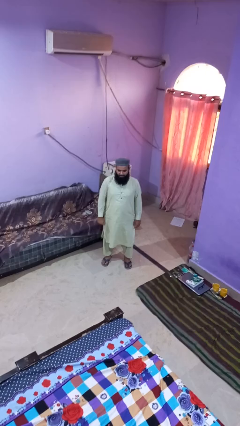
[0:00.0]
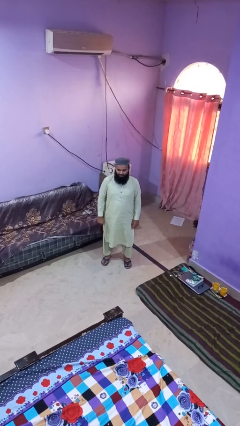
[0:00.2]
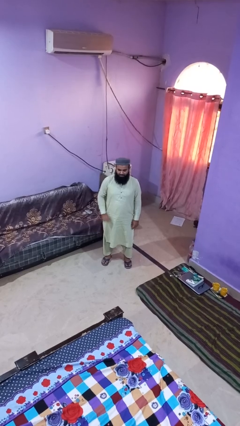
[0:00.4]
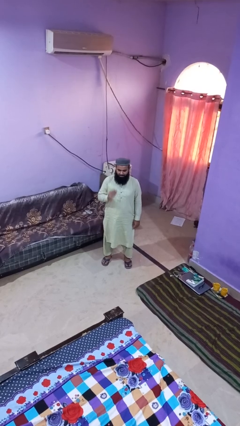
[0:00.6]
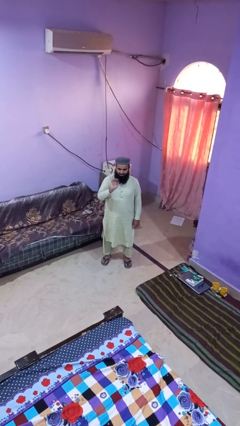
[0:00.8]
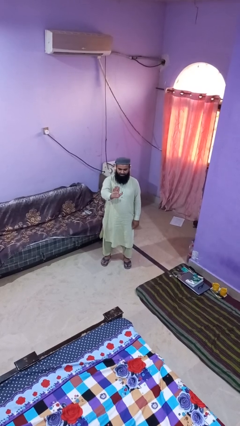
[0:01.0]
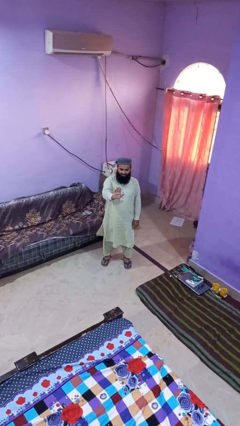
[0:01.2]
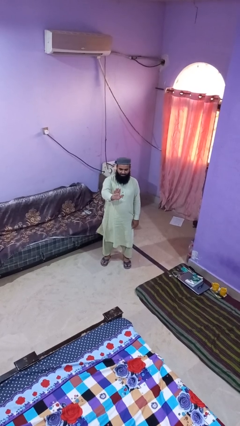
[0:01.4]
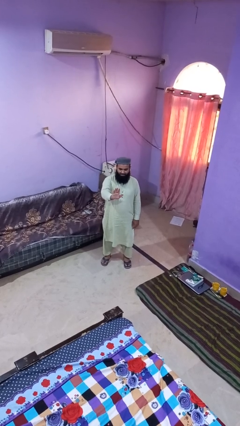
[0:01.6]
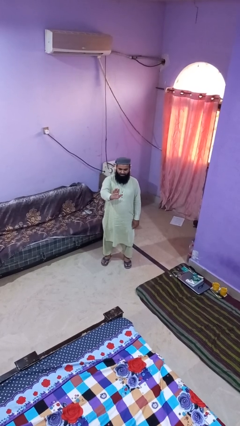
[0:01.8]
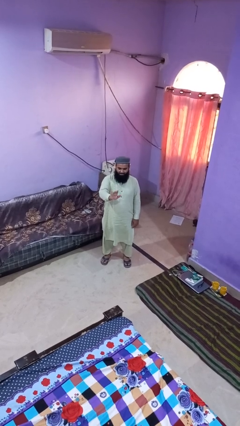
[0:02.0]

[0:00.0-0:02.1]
person gestures stop

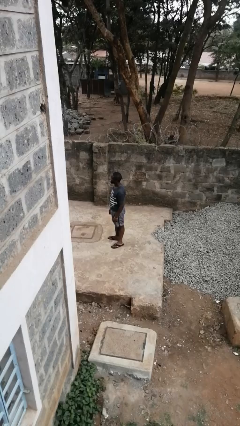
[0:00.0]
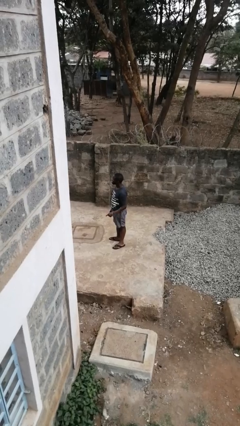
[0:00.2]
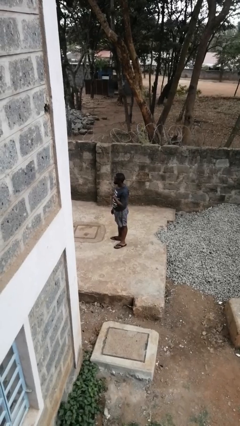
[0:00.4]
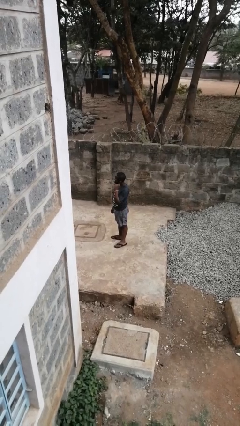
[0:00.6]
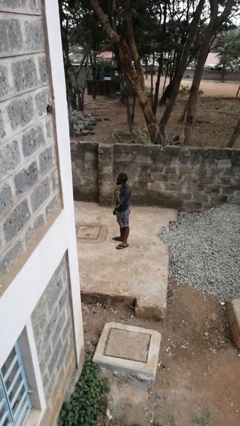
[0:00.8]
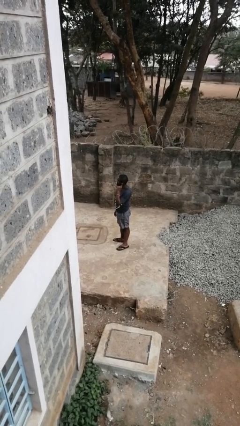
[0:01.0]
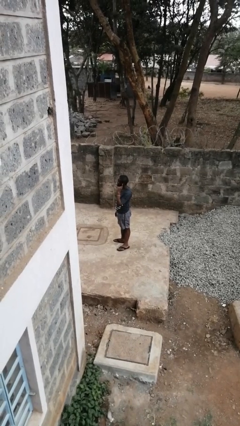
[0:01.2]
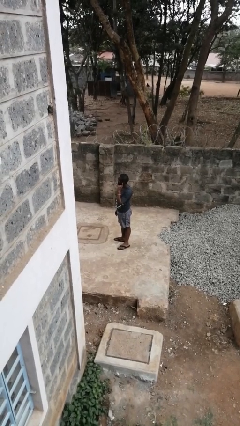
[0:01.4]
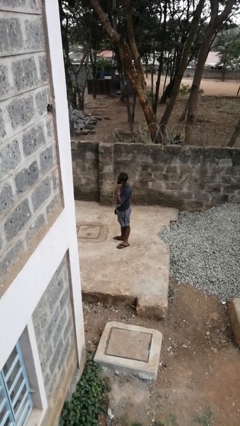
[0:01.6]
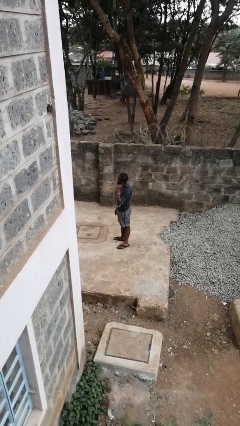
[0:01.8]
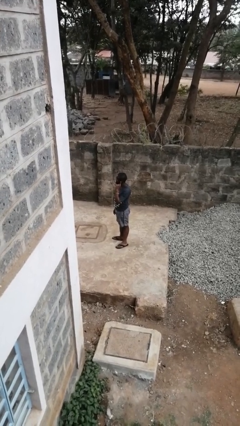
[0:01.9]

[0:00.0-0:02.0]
person gestures listen closely

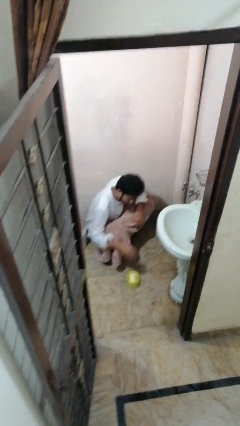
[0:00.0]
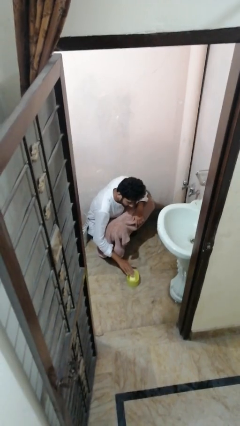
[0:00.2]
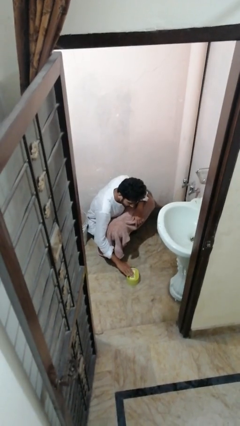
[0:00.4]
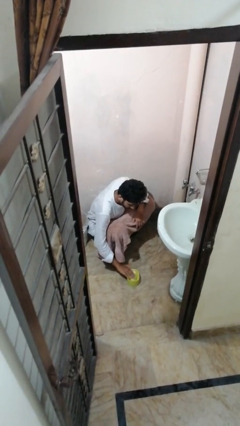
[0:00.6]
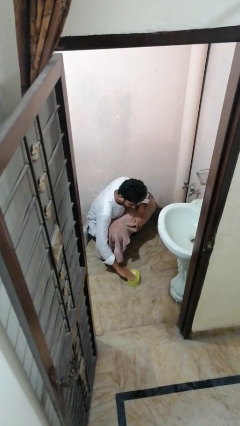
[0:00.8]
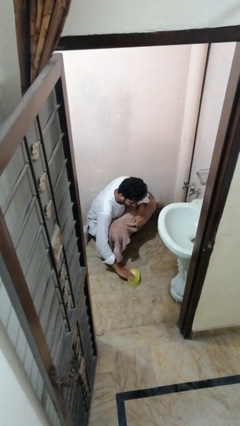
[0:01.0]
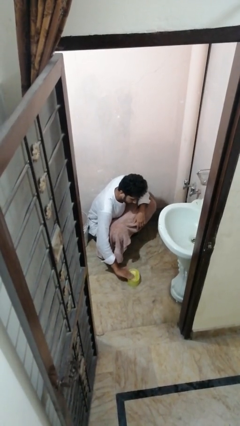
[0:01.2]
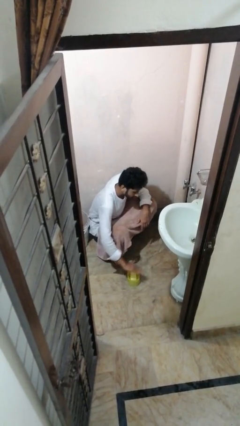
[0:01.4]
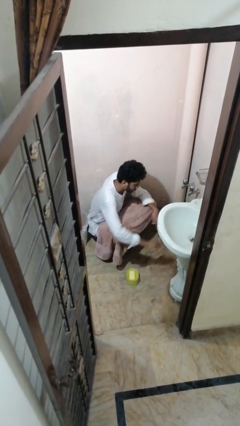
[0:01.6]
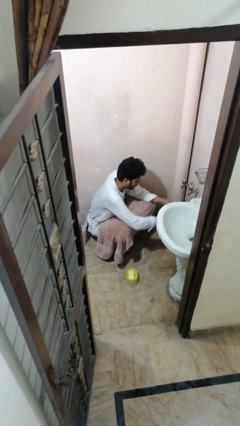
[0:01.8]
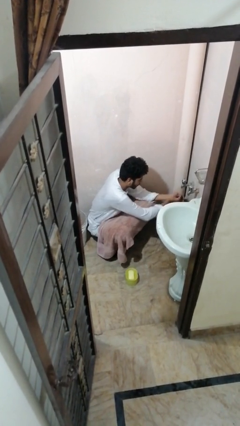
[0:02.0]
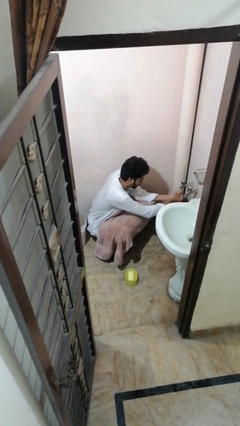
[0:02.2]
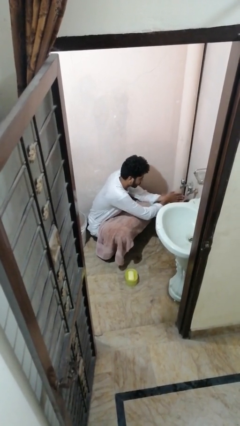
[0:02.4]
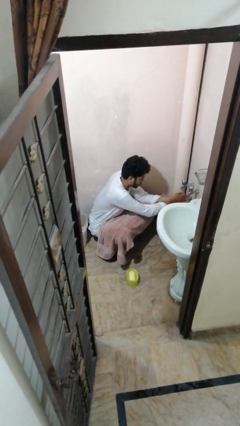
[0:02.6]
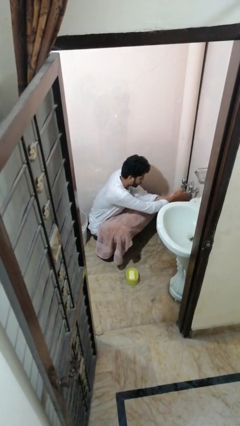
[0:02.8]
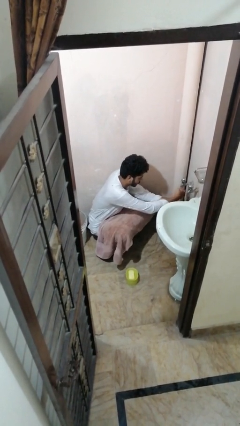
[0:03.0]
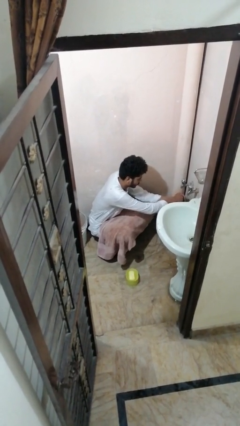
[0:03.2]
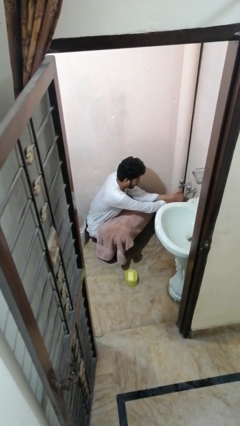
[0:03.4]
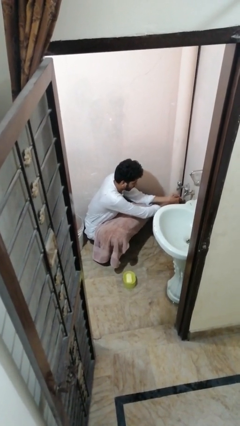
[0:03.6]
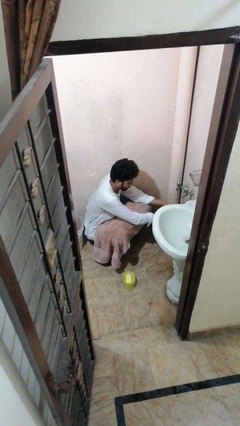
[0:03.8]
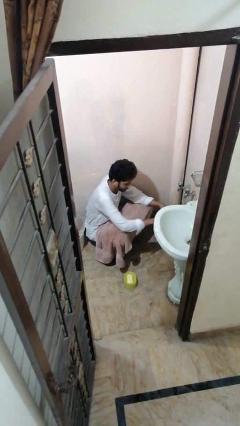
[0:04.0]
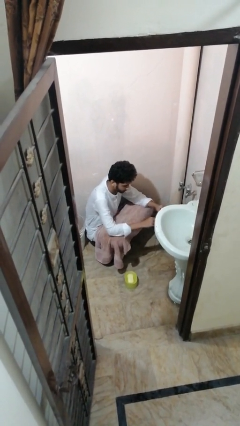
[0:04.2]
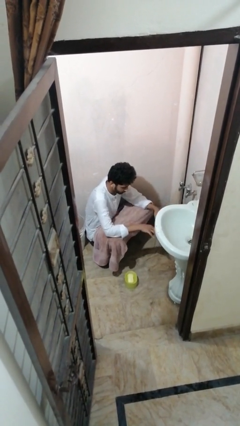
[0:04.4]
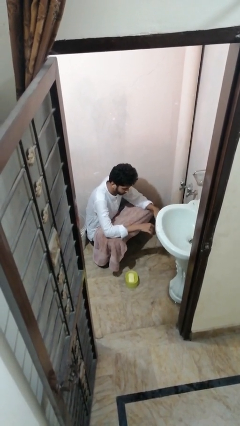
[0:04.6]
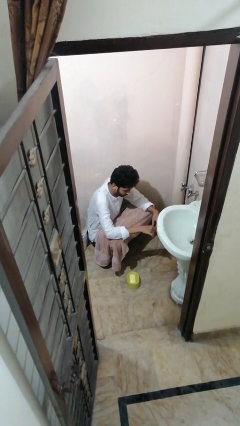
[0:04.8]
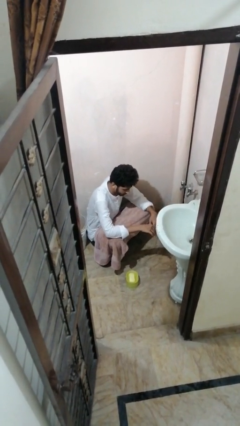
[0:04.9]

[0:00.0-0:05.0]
person washes hands

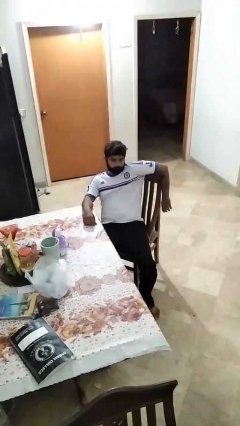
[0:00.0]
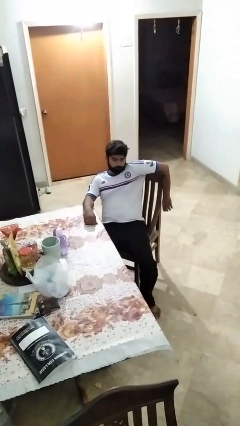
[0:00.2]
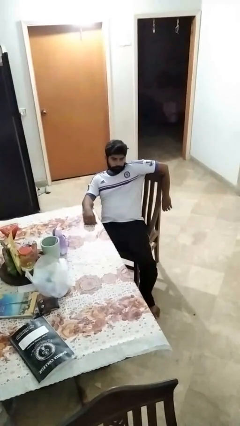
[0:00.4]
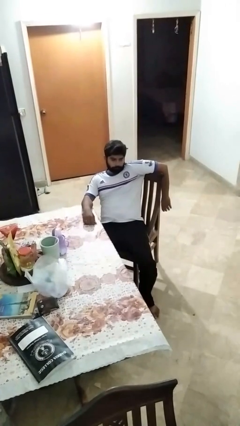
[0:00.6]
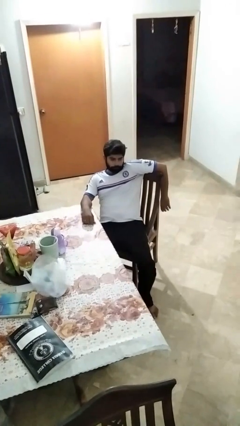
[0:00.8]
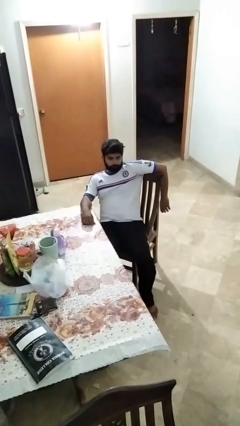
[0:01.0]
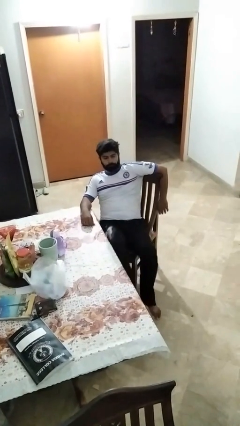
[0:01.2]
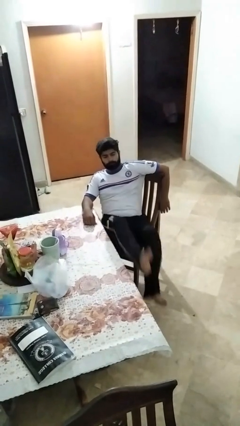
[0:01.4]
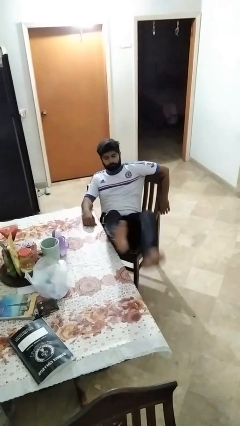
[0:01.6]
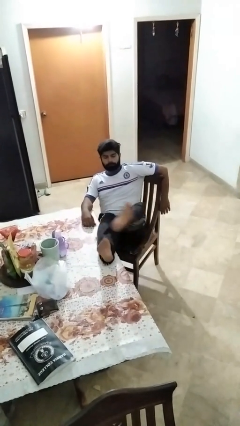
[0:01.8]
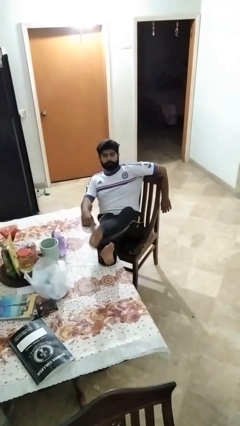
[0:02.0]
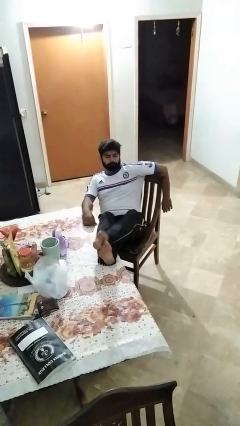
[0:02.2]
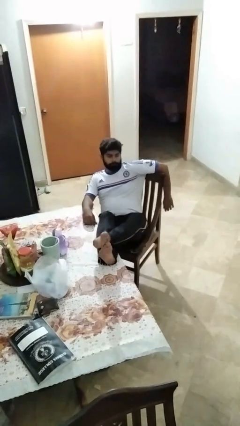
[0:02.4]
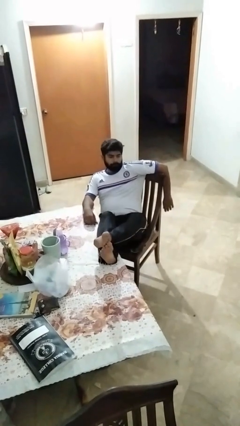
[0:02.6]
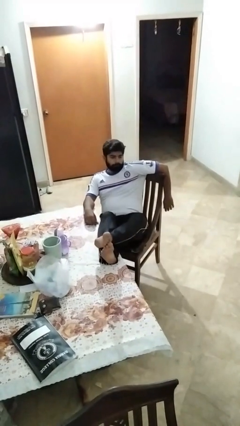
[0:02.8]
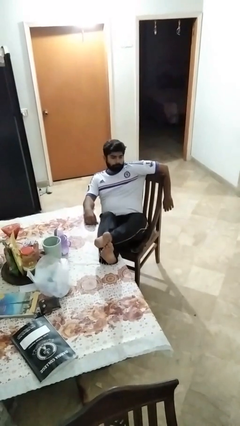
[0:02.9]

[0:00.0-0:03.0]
person puts feet up

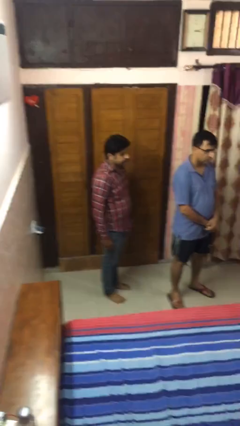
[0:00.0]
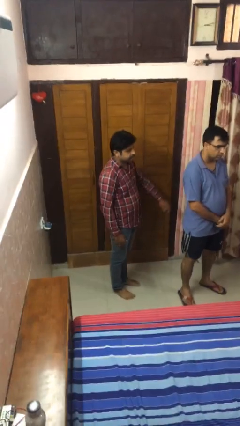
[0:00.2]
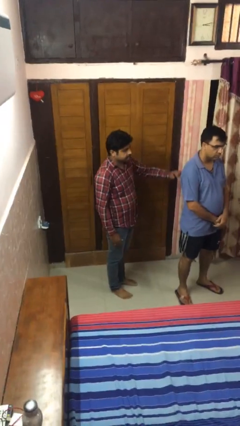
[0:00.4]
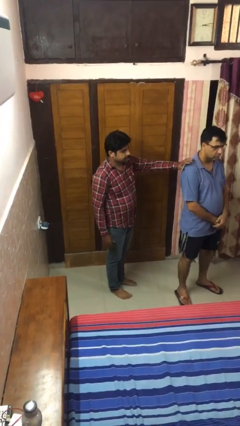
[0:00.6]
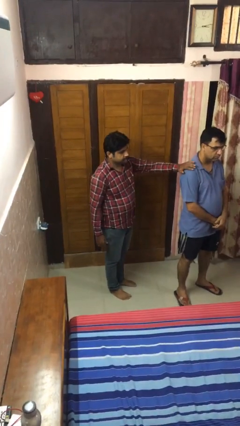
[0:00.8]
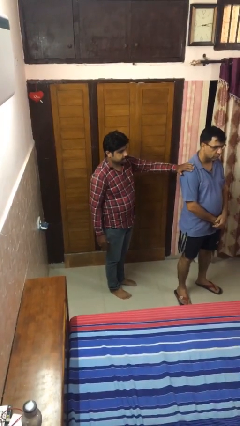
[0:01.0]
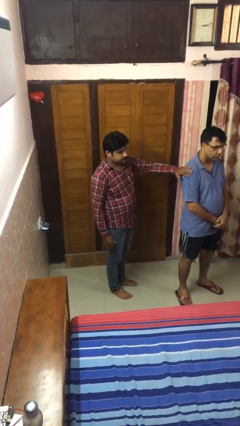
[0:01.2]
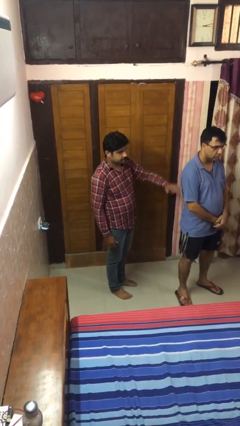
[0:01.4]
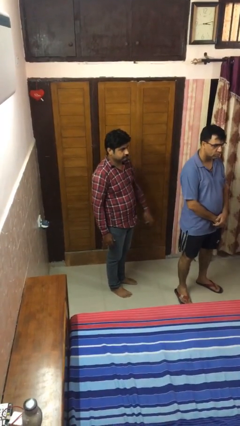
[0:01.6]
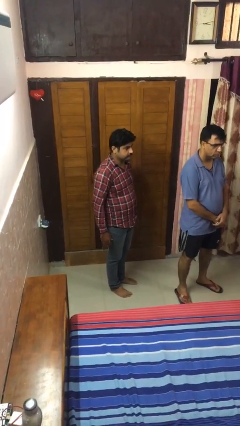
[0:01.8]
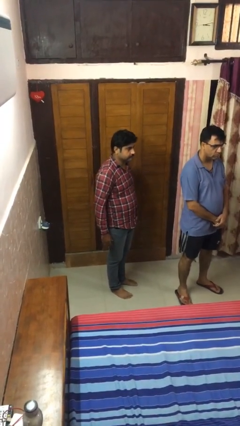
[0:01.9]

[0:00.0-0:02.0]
person touches back of person

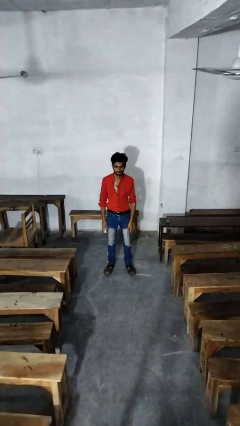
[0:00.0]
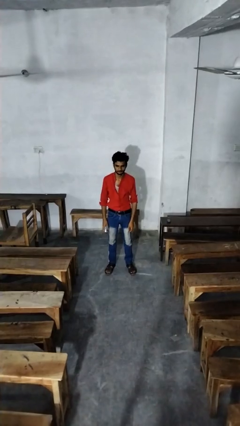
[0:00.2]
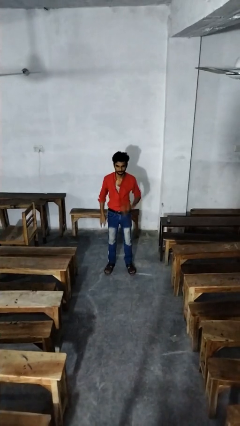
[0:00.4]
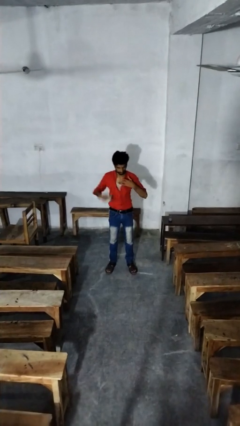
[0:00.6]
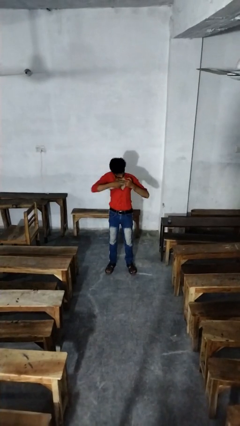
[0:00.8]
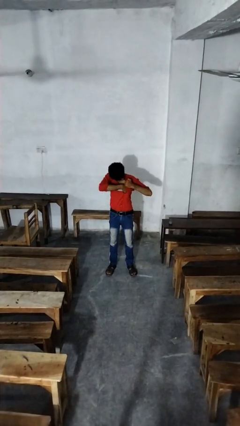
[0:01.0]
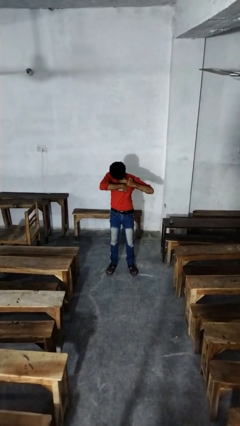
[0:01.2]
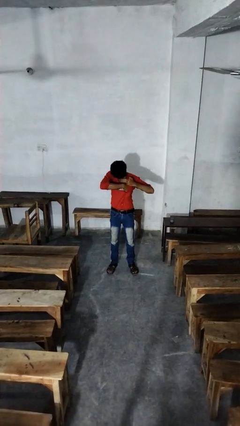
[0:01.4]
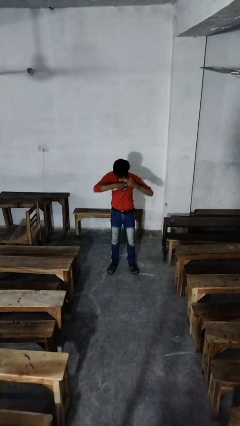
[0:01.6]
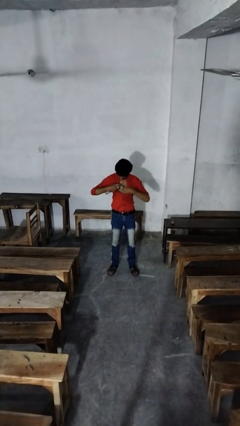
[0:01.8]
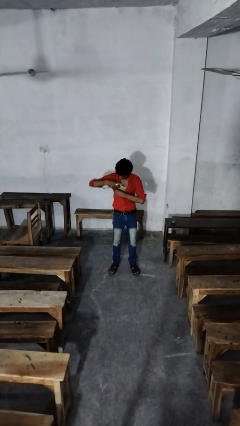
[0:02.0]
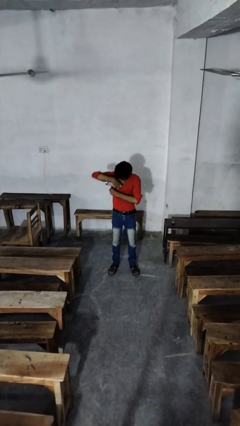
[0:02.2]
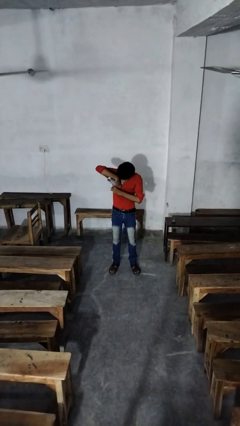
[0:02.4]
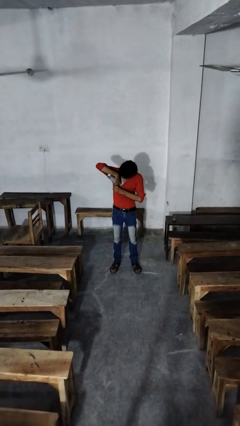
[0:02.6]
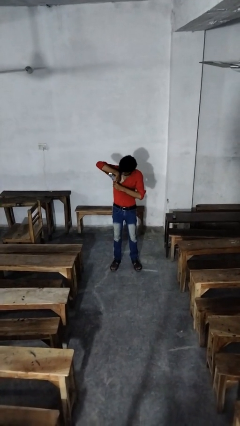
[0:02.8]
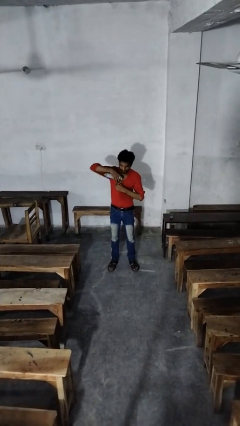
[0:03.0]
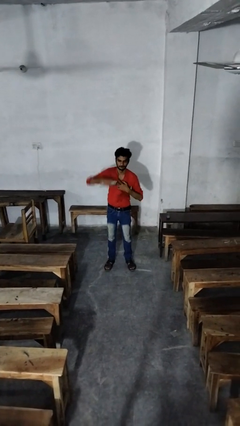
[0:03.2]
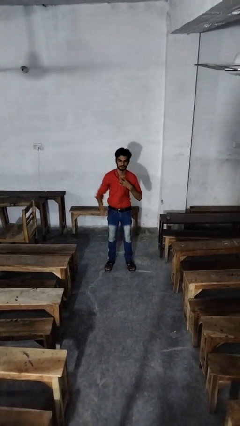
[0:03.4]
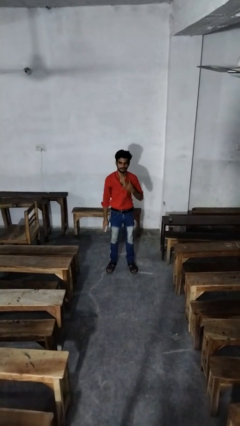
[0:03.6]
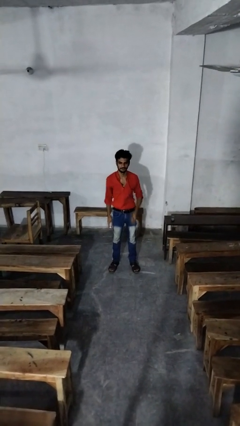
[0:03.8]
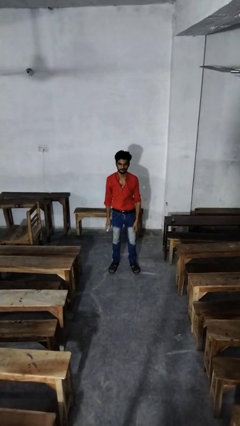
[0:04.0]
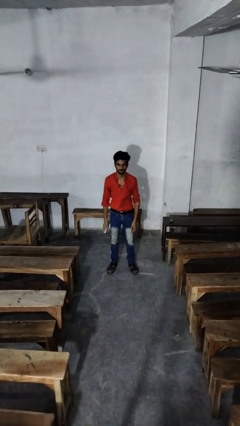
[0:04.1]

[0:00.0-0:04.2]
person applies deodorant
